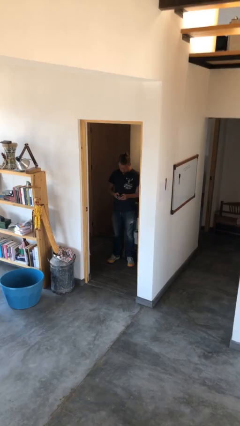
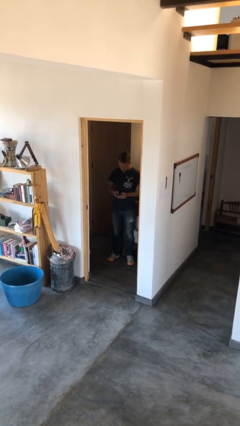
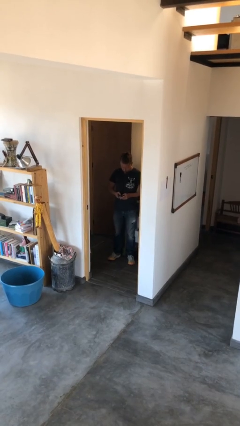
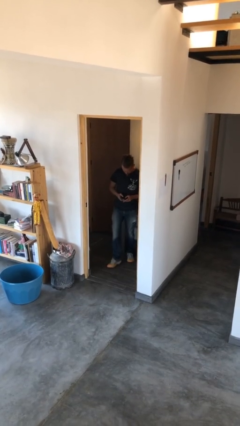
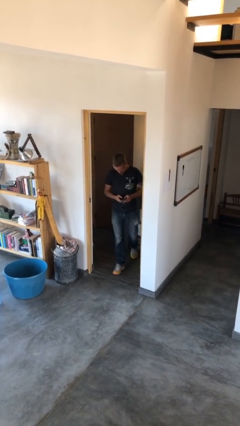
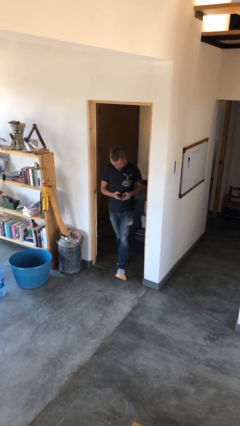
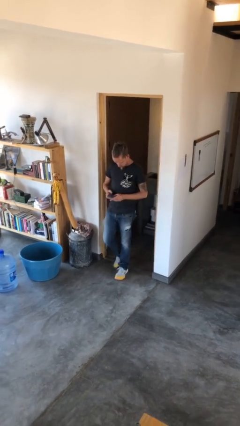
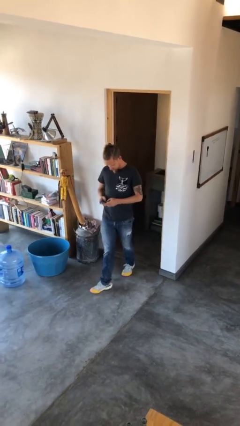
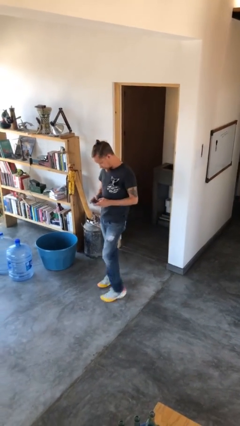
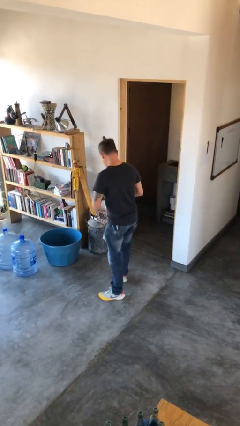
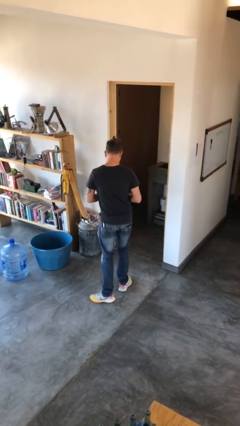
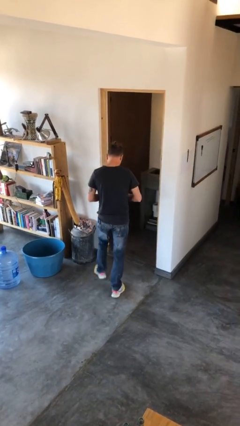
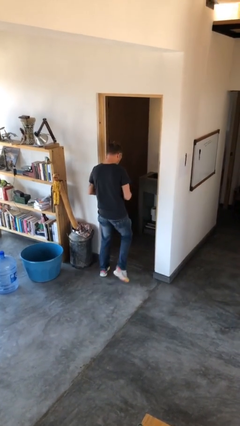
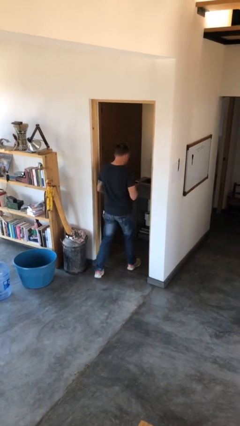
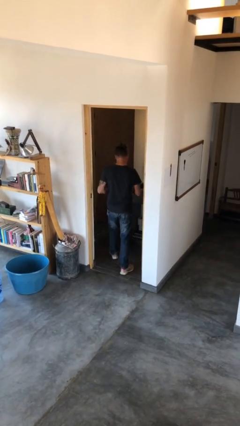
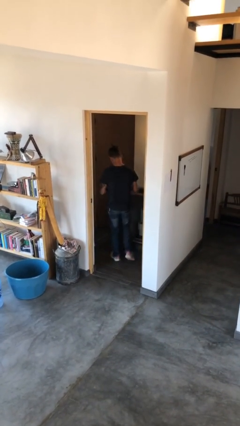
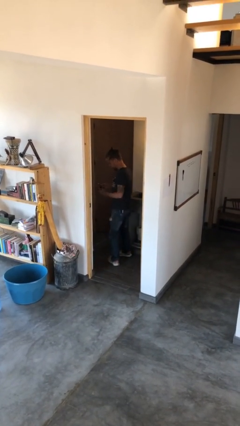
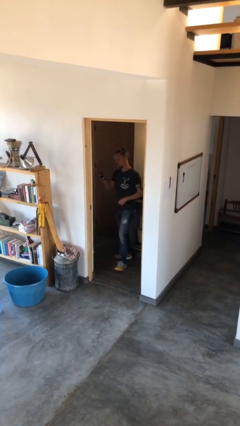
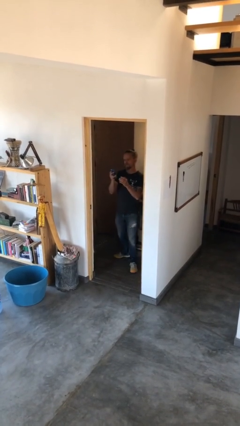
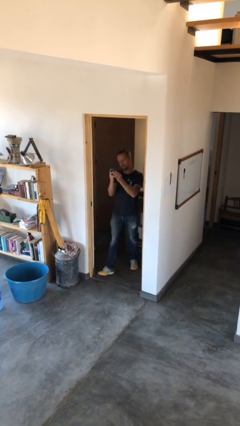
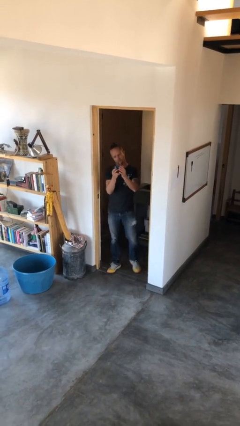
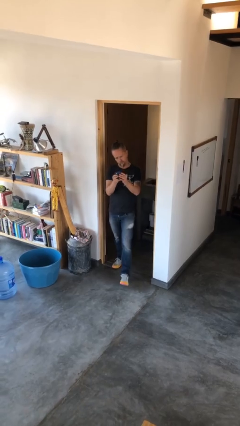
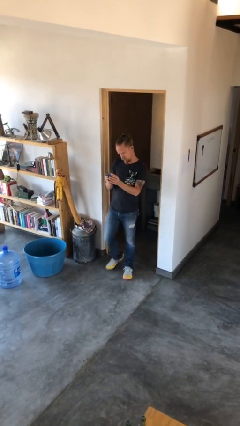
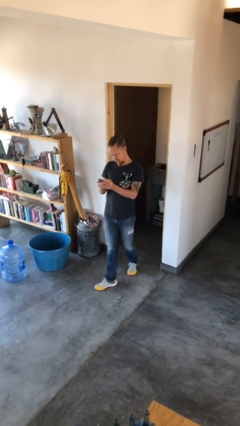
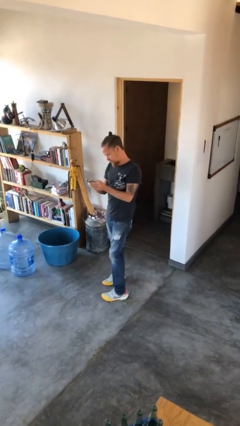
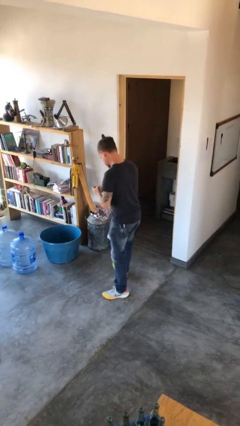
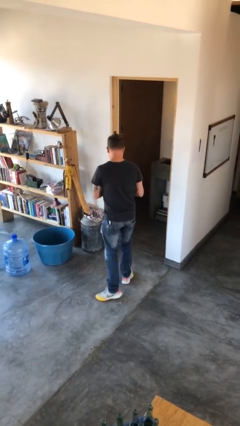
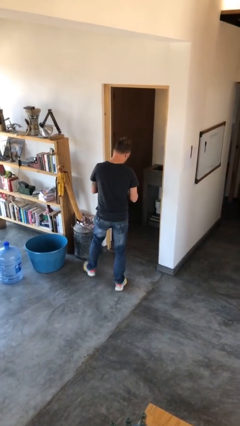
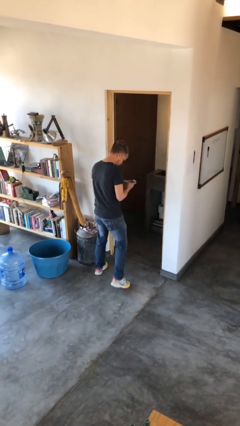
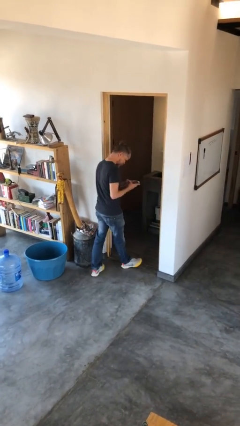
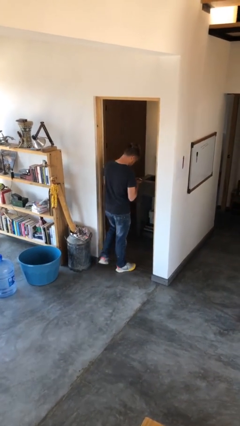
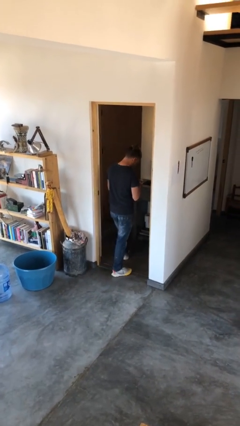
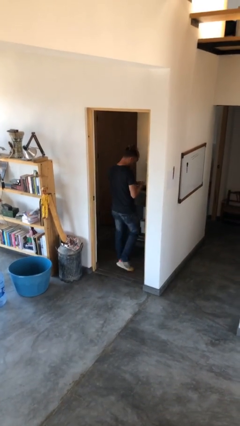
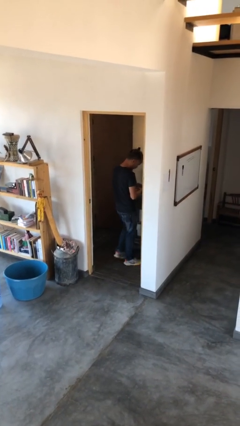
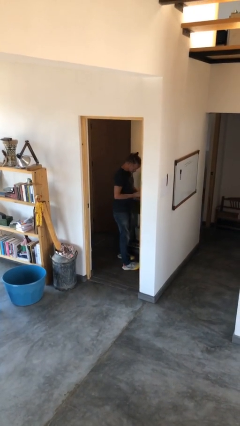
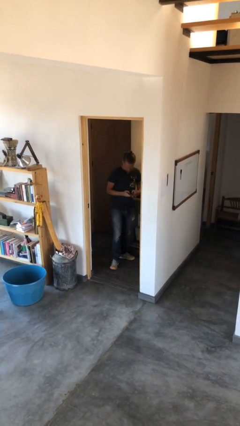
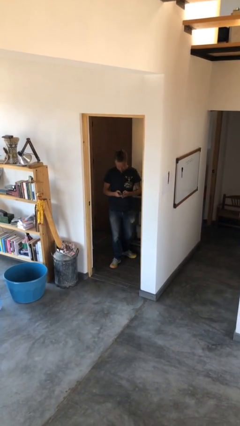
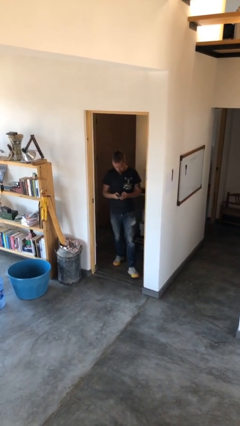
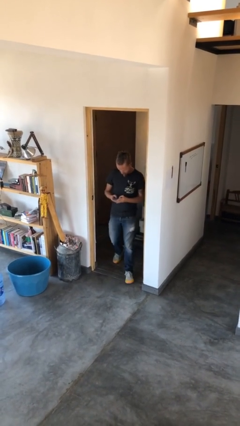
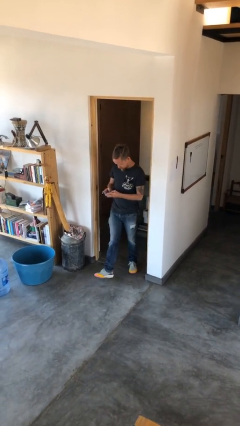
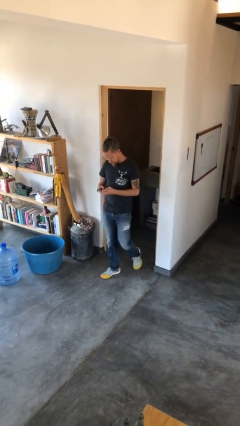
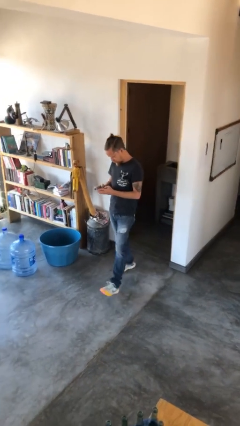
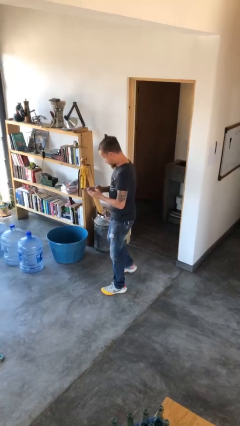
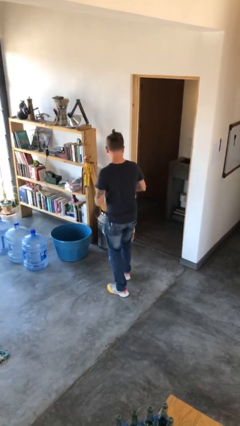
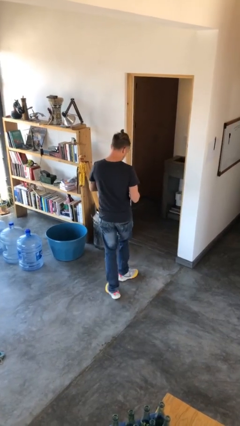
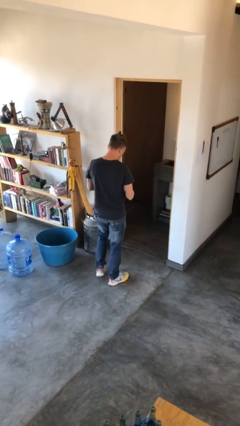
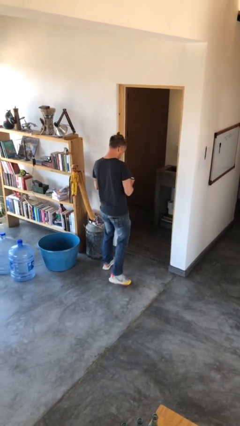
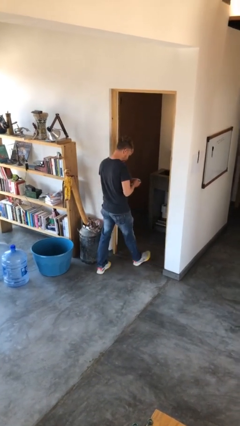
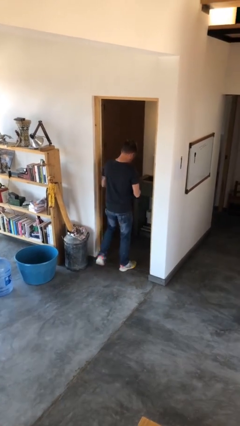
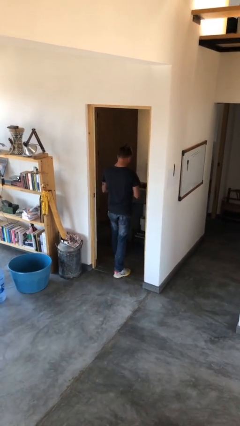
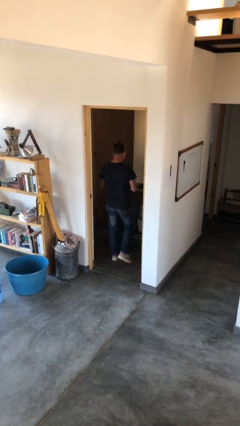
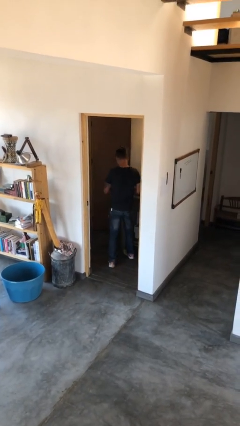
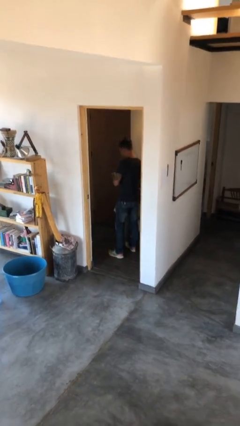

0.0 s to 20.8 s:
person texts on phone

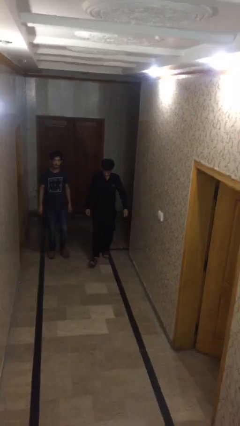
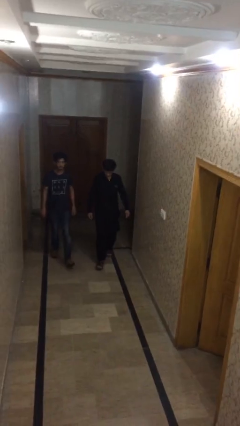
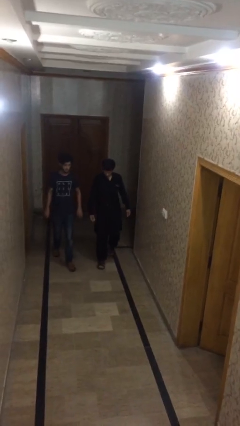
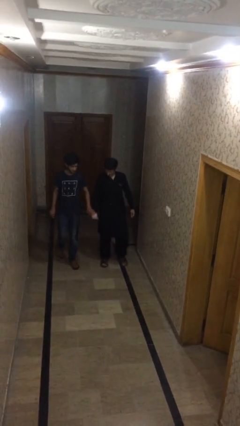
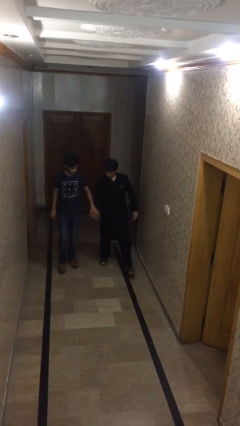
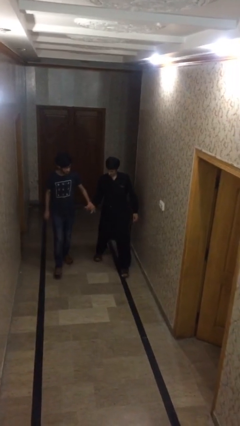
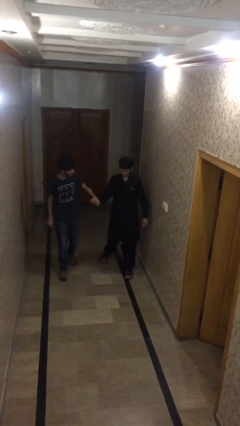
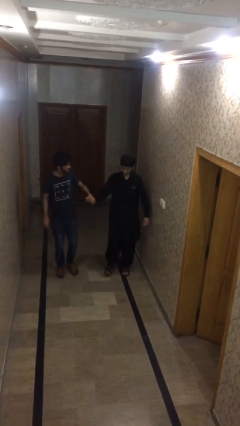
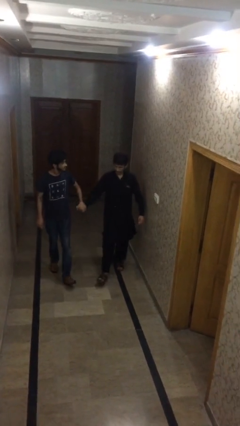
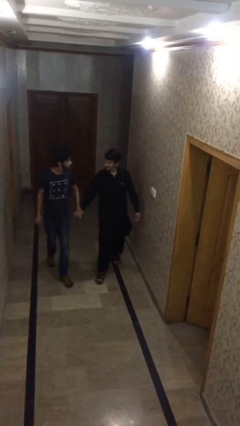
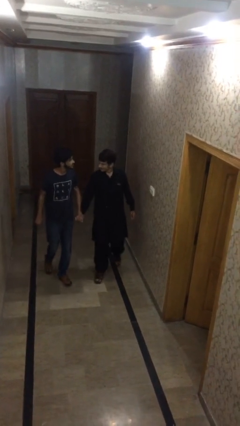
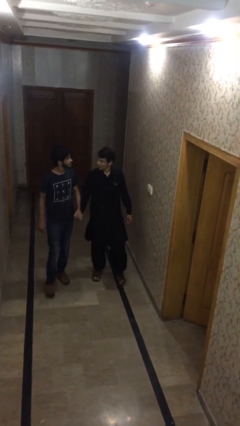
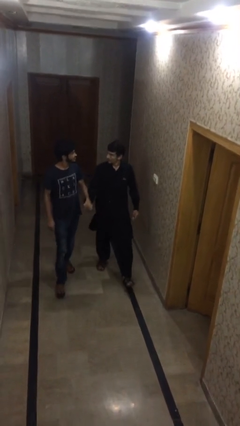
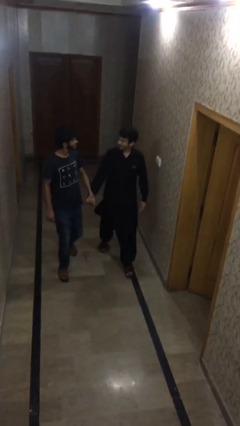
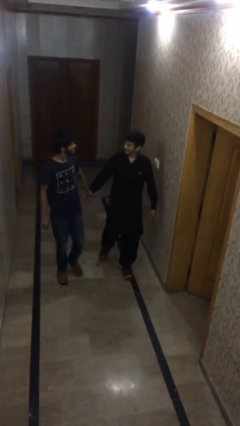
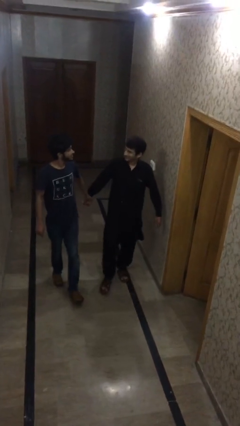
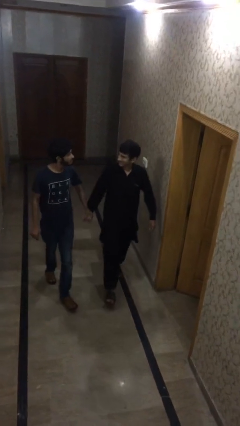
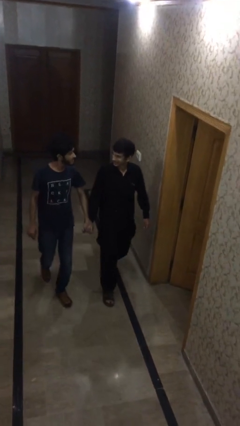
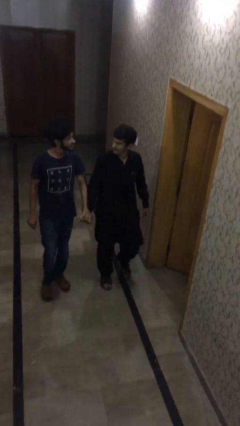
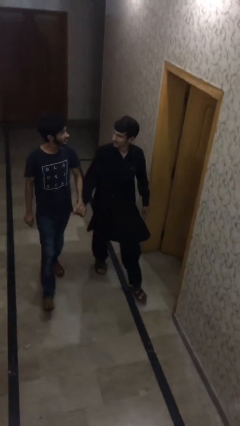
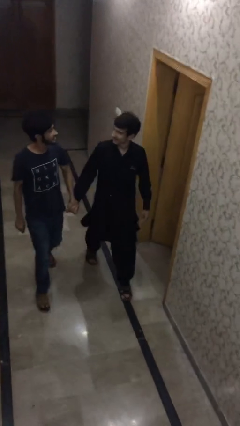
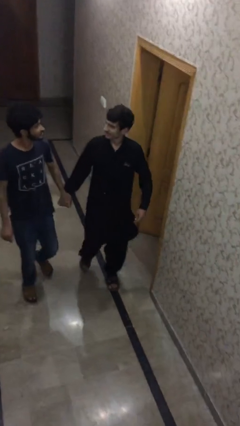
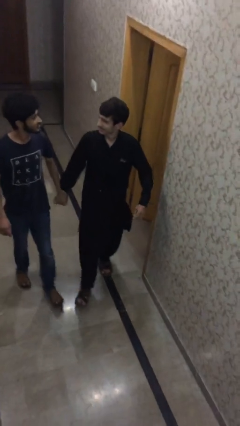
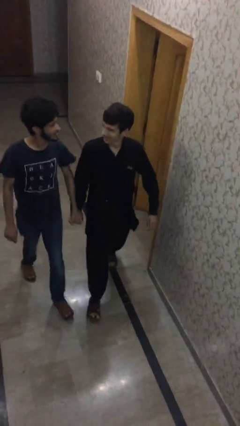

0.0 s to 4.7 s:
person holds hand

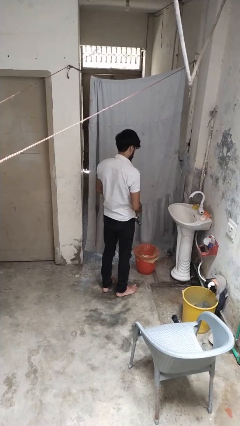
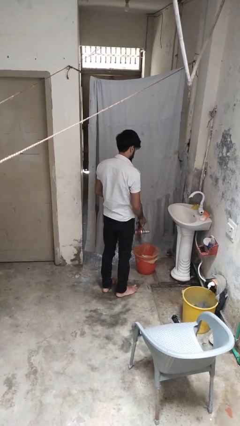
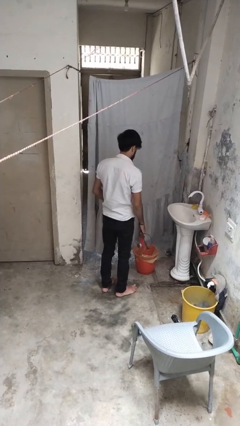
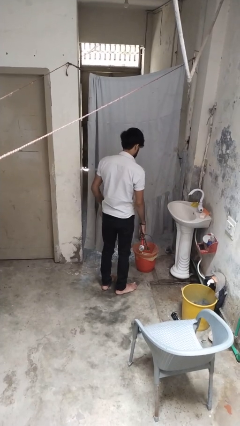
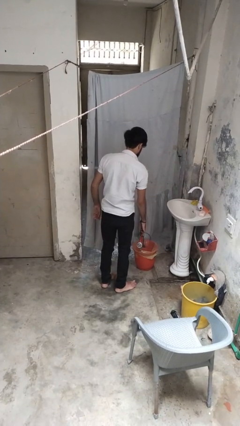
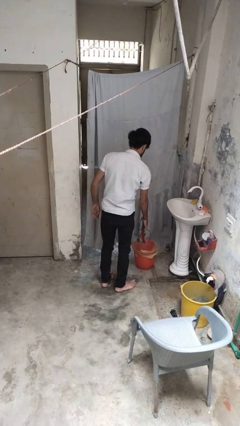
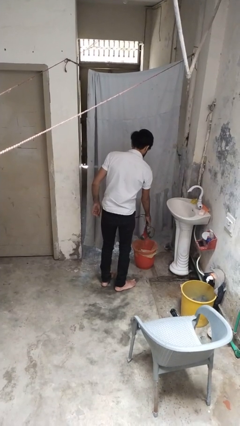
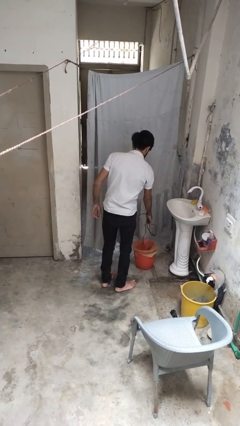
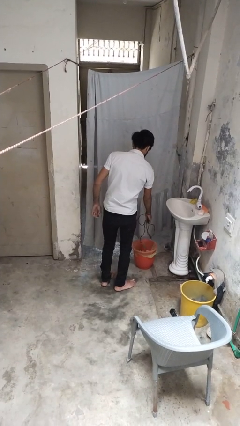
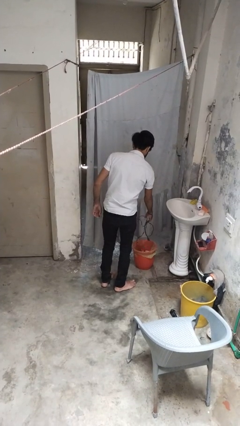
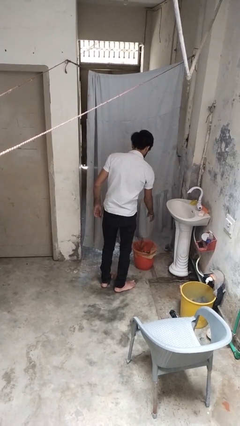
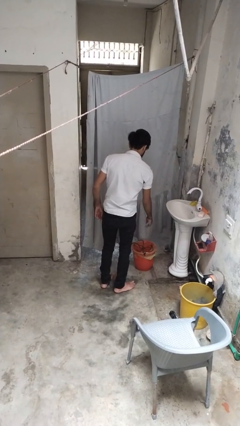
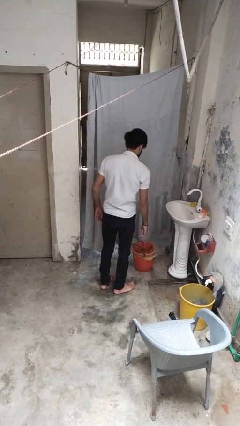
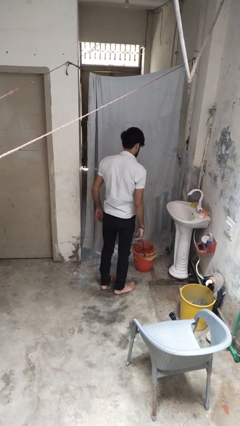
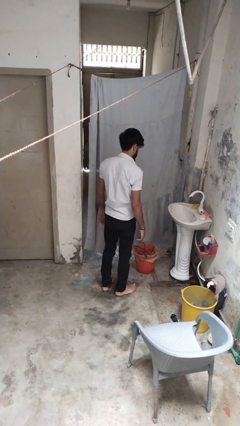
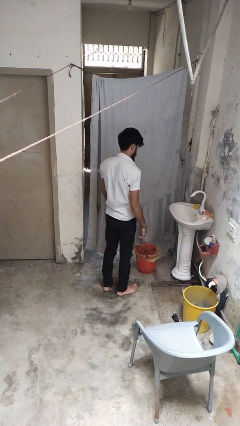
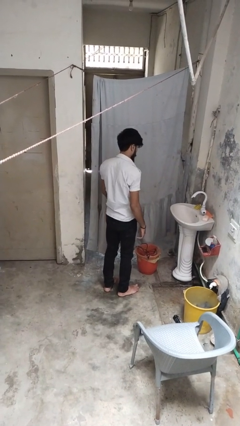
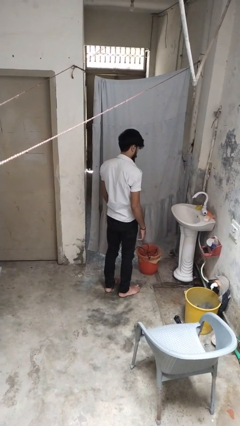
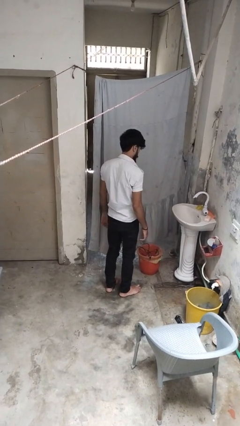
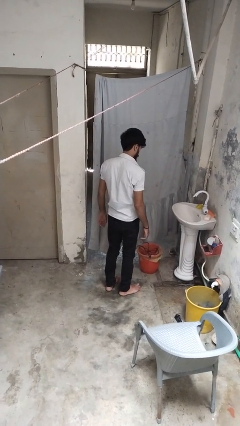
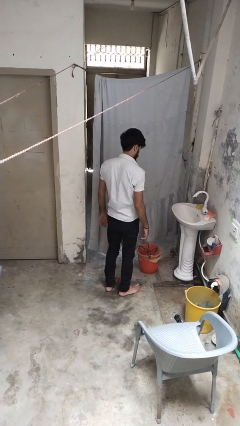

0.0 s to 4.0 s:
person discards trash
